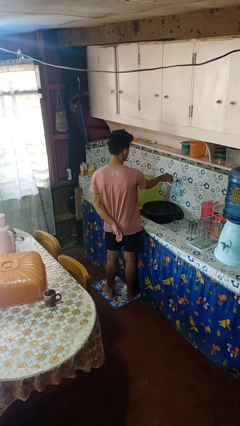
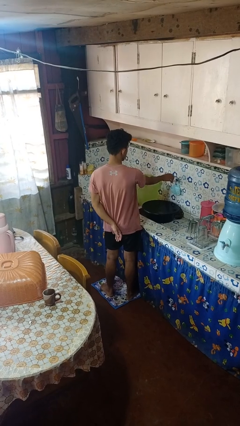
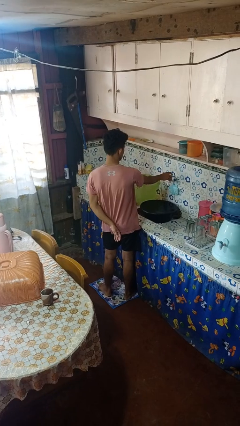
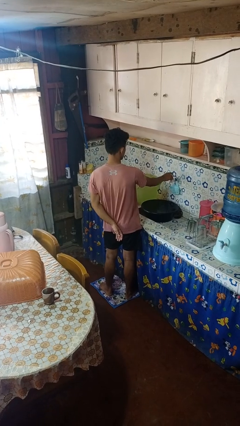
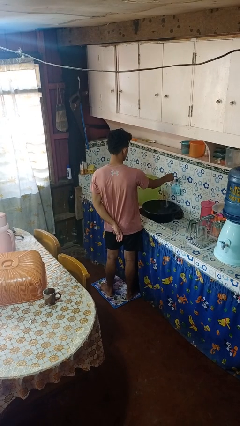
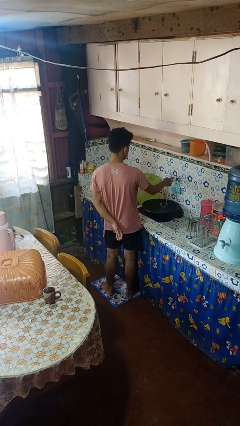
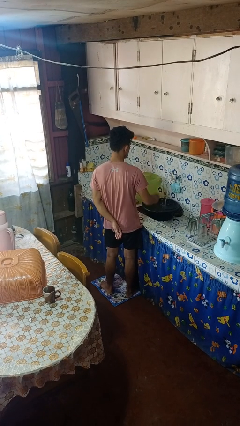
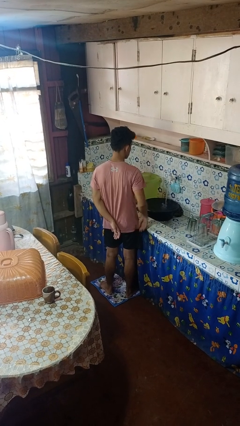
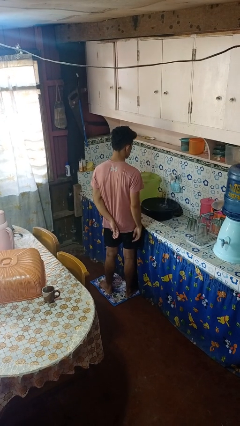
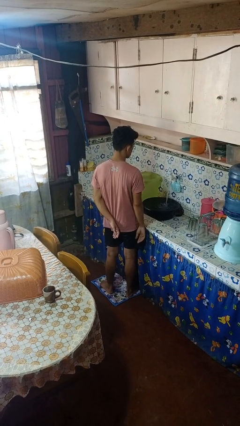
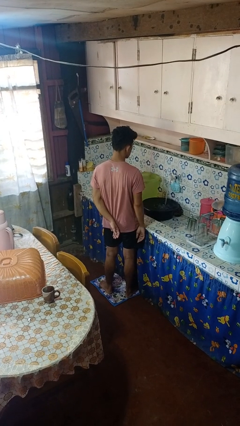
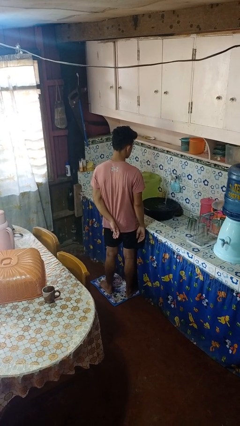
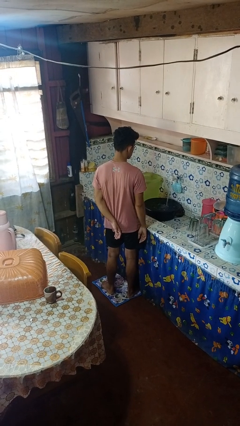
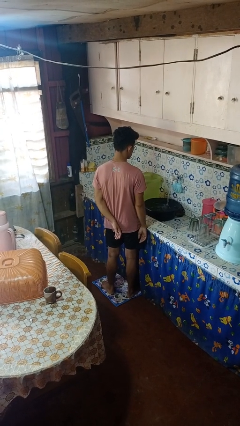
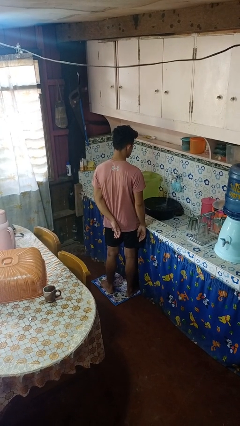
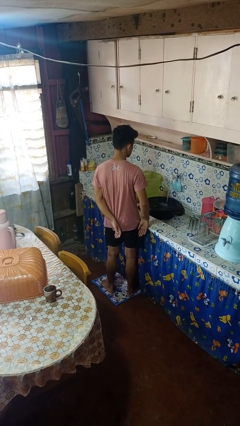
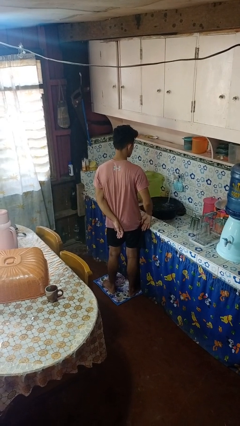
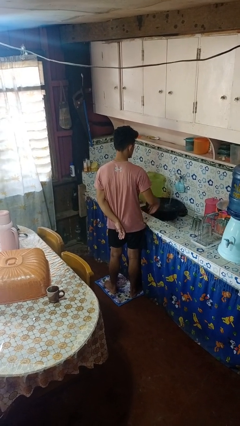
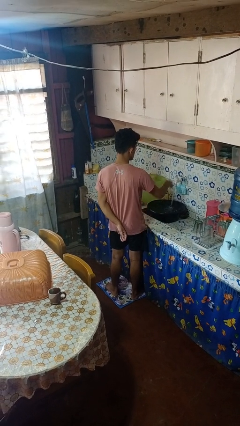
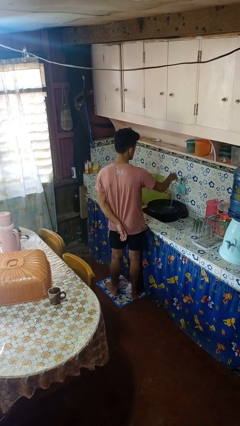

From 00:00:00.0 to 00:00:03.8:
person turns on faucet

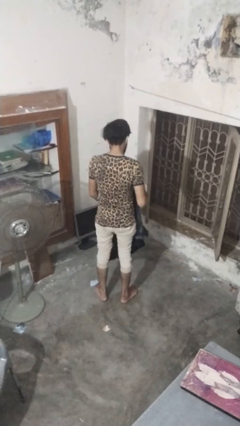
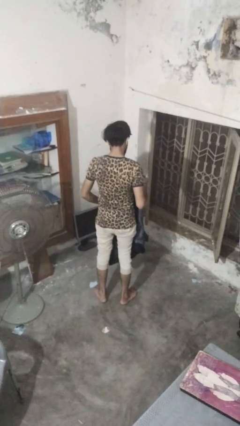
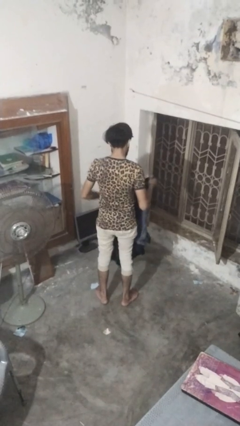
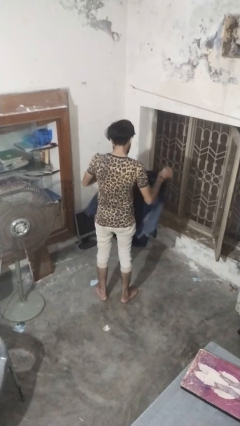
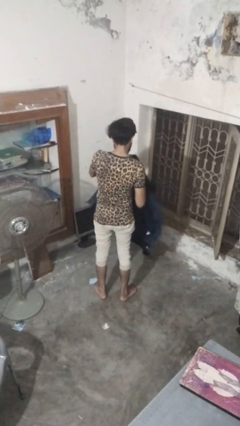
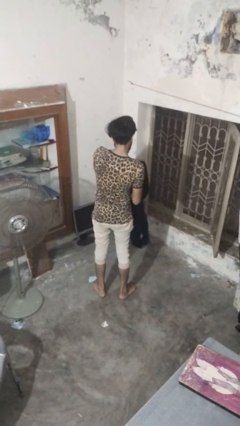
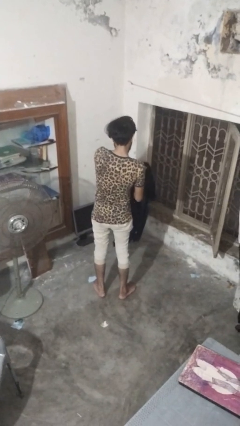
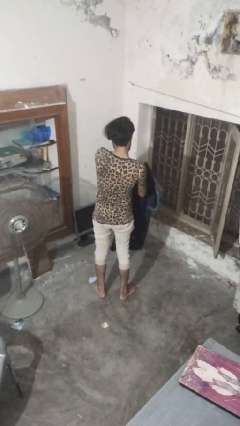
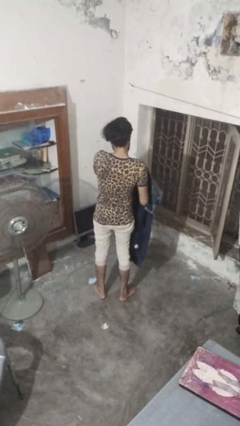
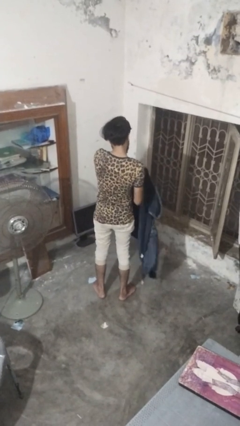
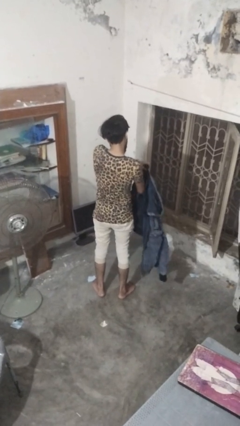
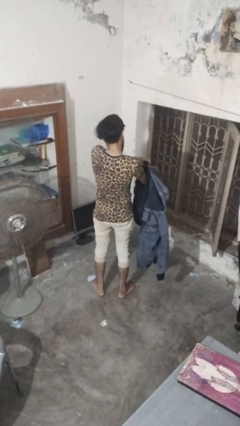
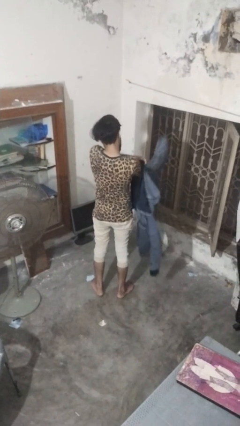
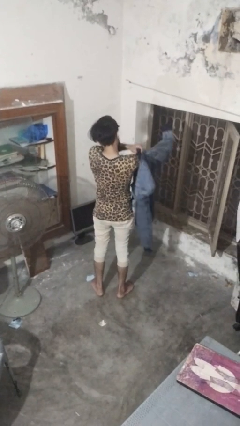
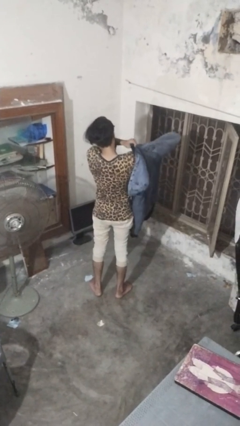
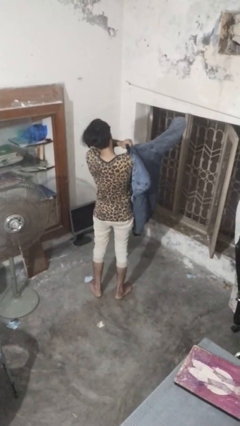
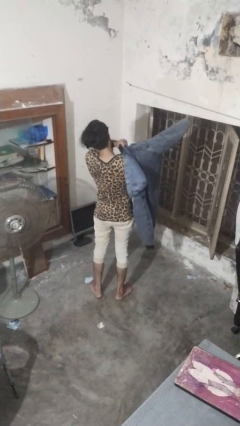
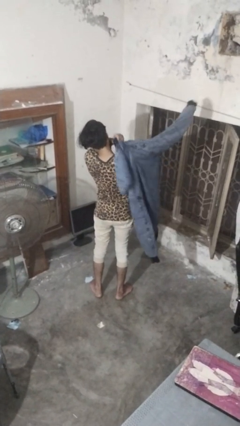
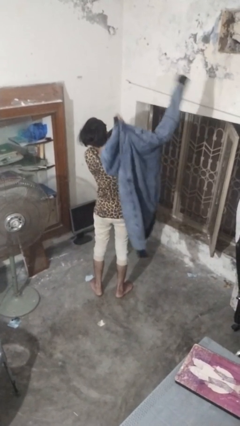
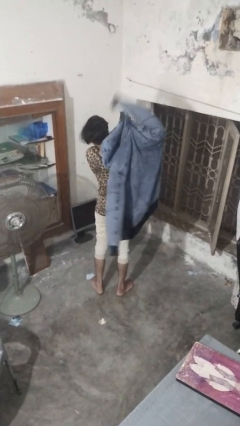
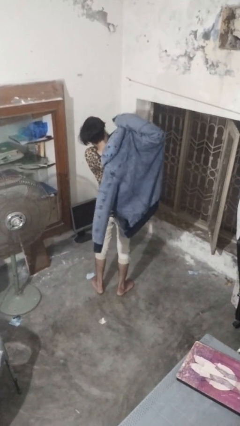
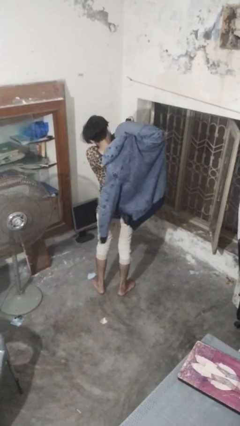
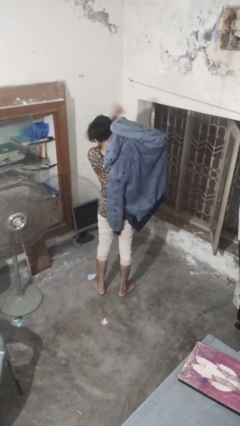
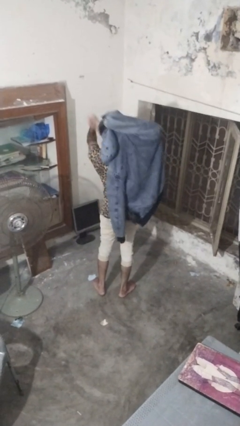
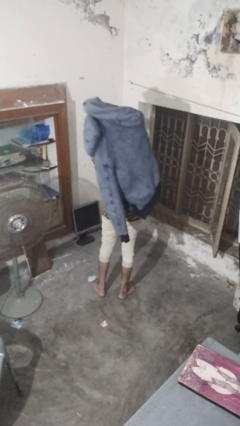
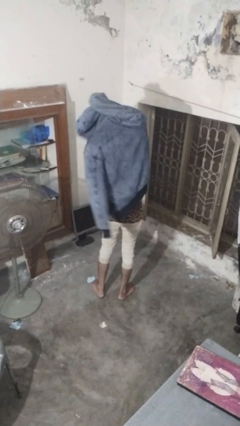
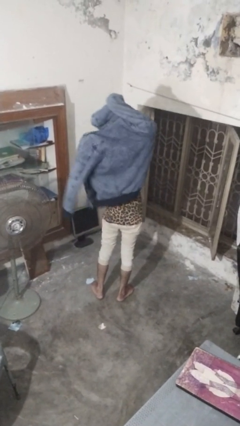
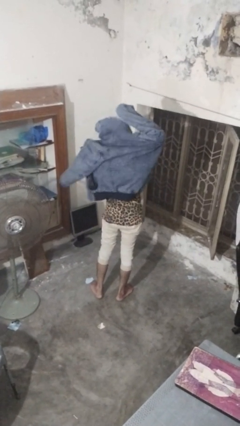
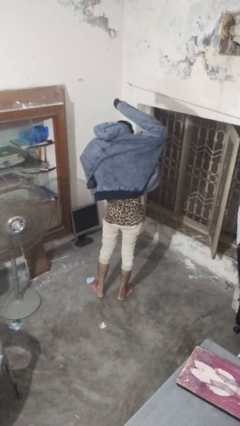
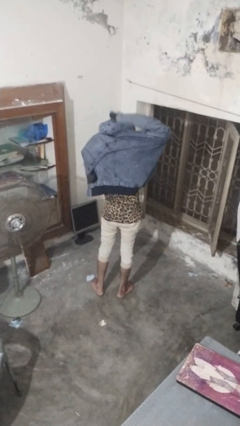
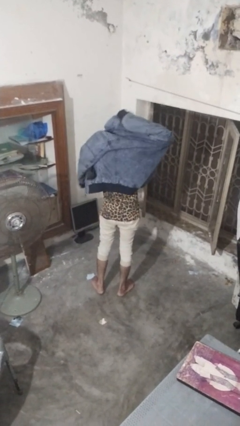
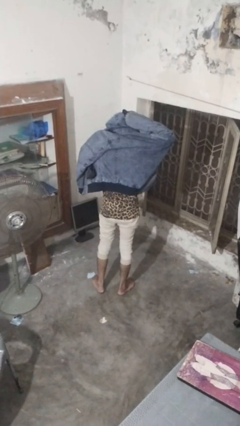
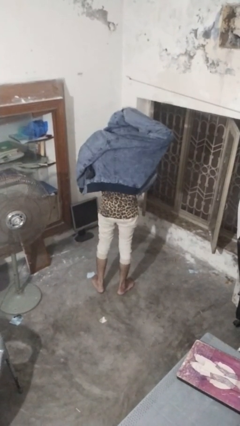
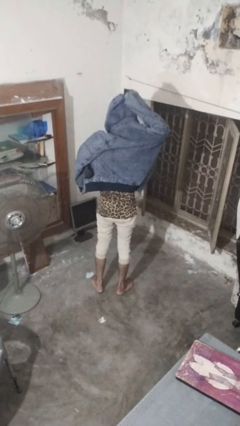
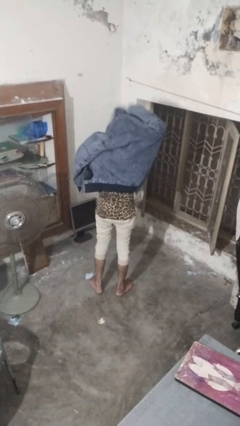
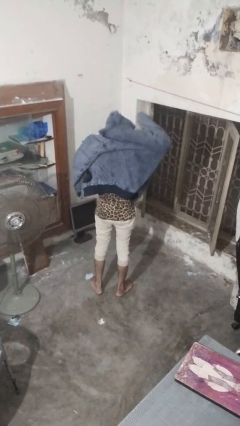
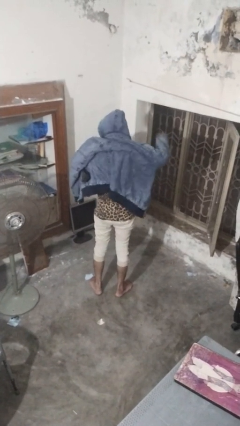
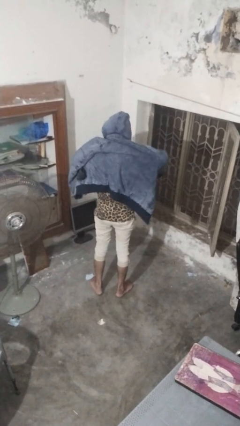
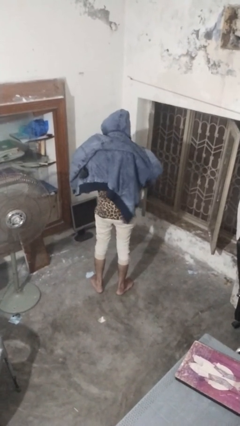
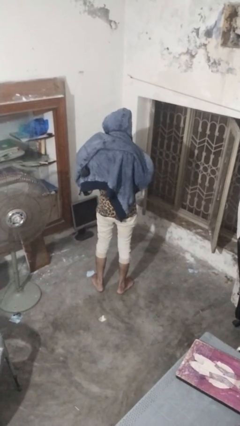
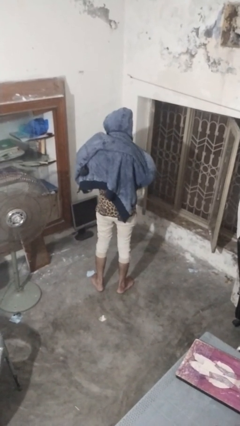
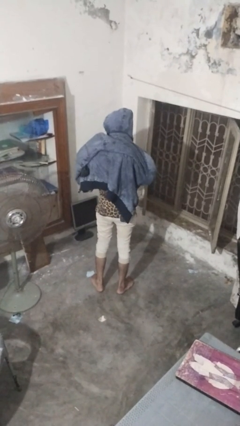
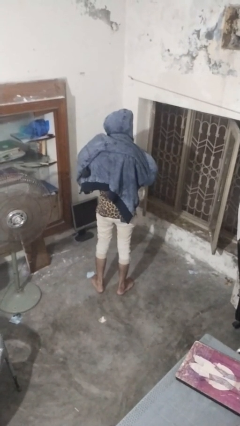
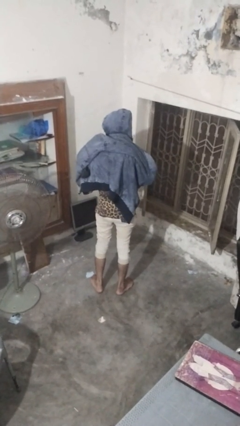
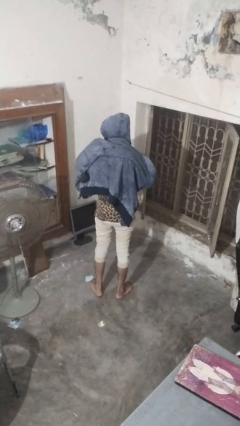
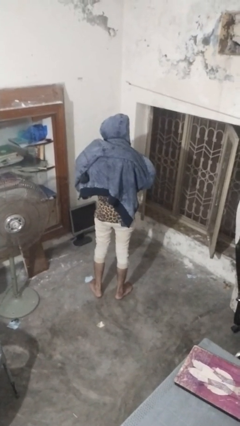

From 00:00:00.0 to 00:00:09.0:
person puts on hoodie

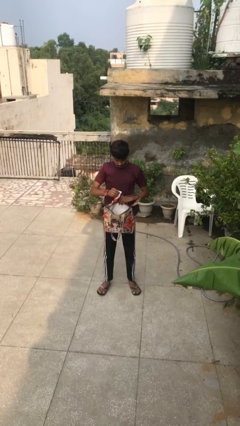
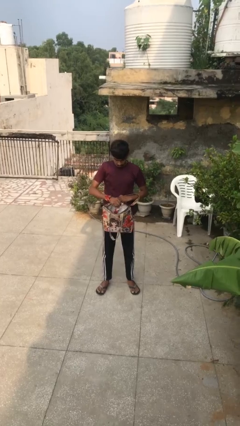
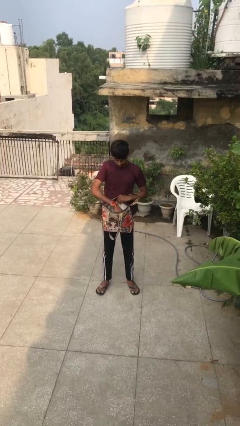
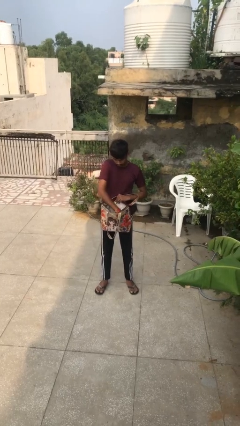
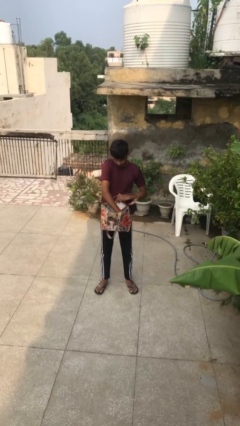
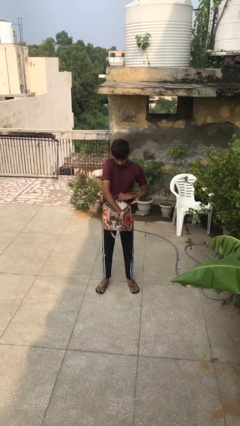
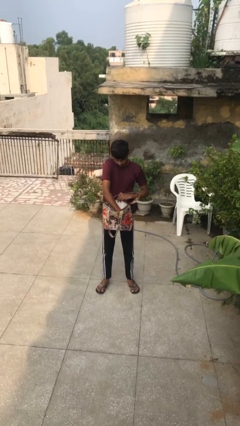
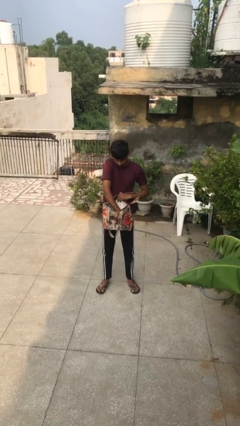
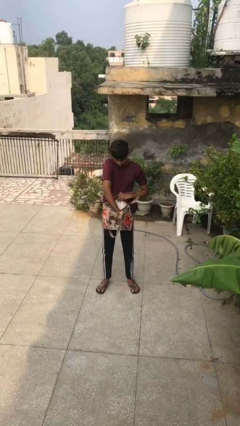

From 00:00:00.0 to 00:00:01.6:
person puts object into purse

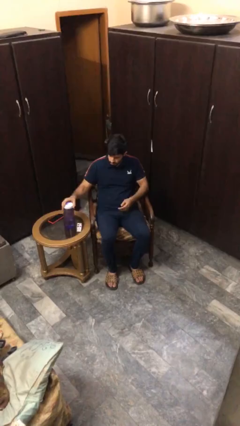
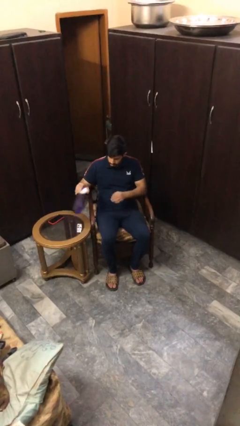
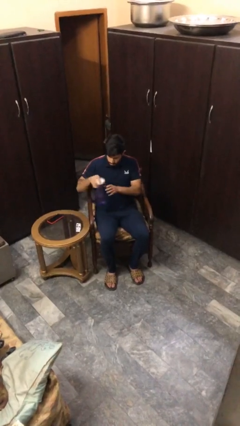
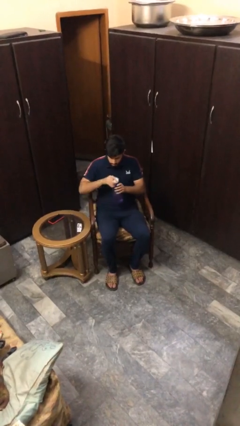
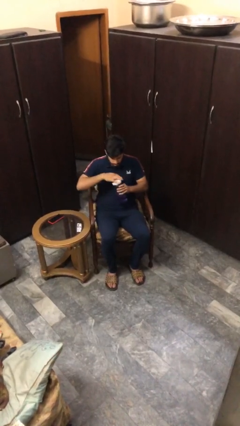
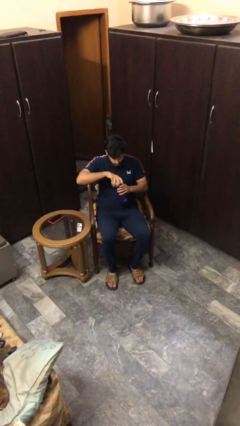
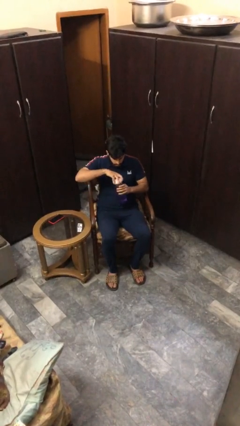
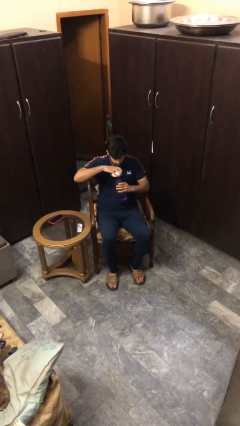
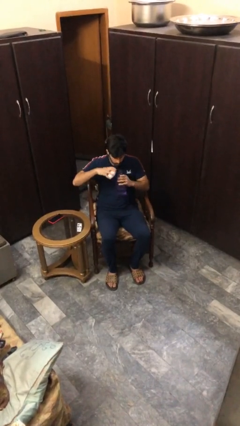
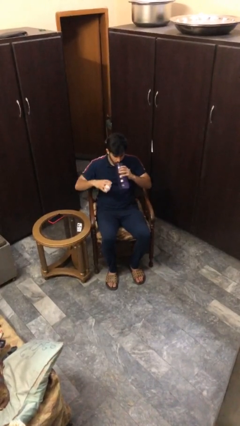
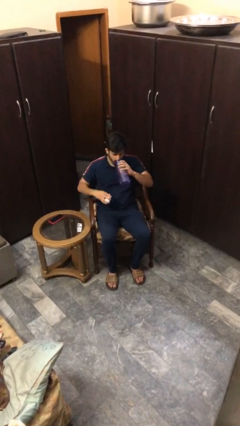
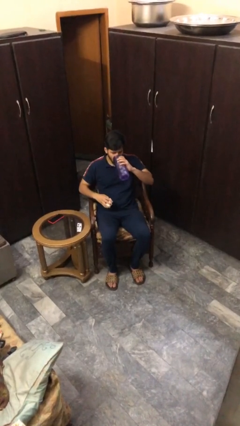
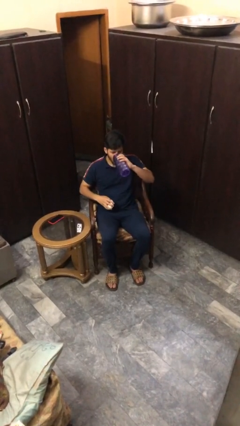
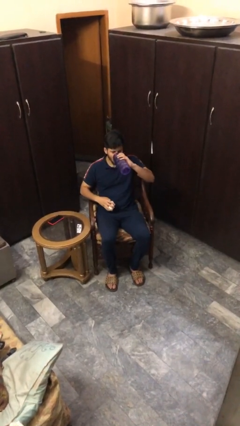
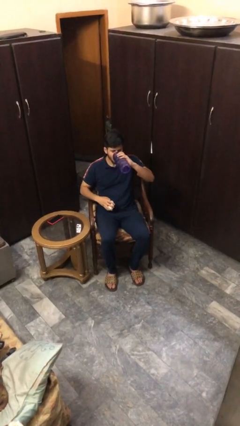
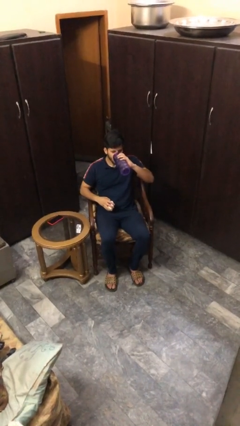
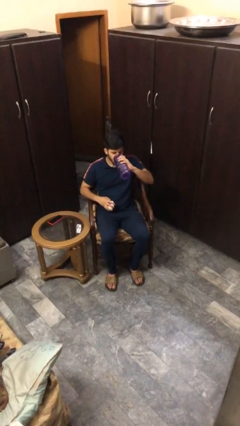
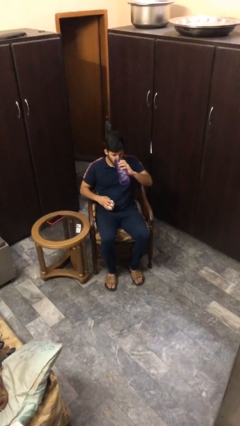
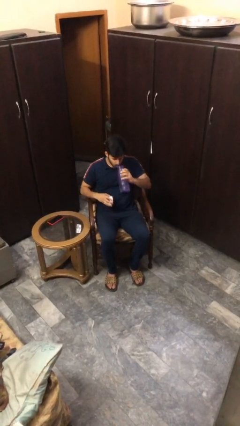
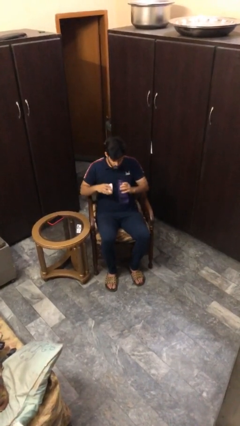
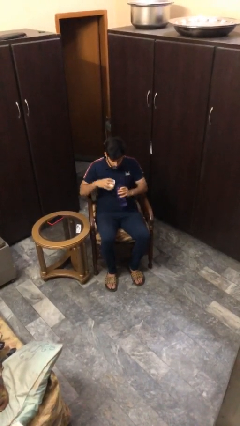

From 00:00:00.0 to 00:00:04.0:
person drinks from cup
